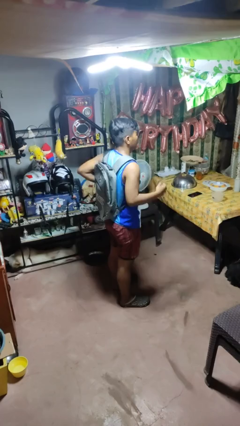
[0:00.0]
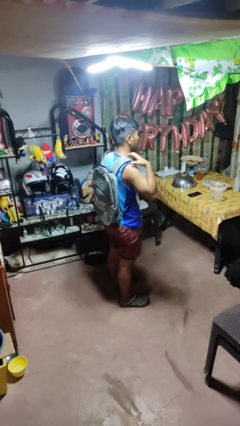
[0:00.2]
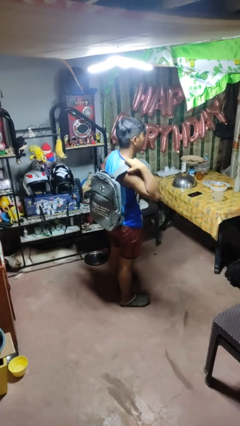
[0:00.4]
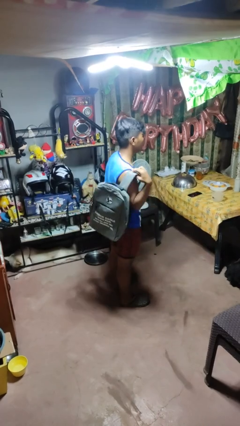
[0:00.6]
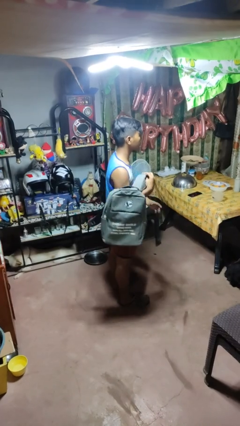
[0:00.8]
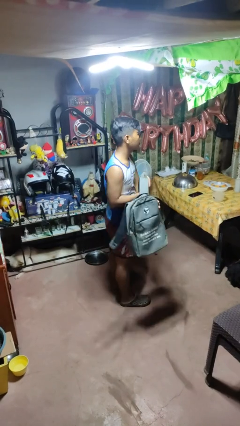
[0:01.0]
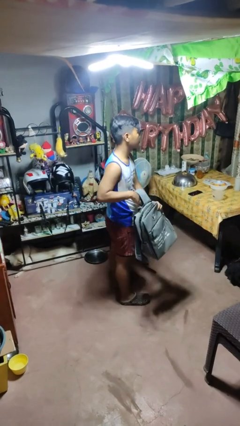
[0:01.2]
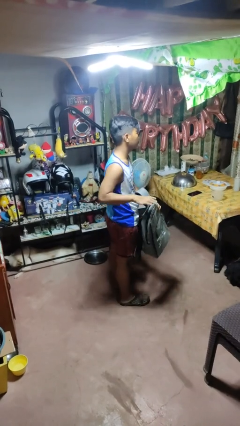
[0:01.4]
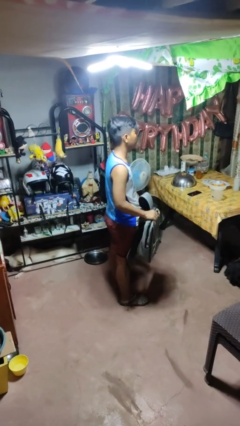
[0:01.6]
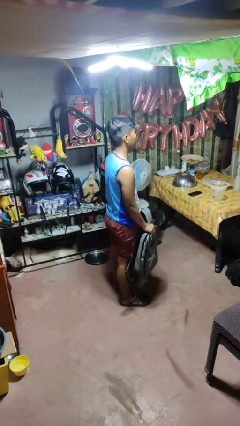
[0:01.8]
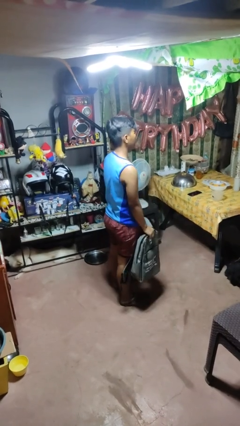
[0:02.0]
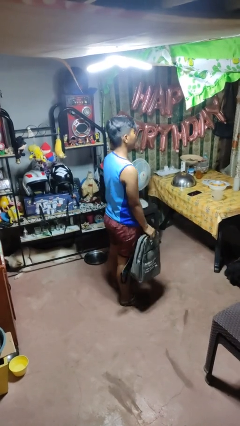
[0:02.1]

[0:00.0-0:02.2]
person takes off backpack

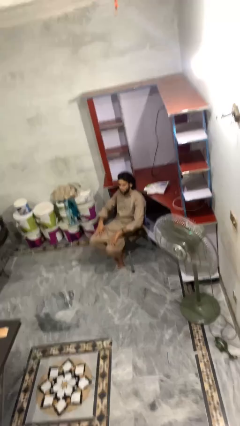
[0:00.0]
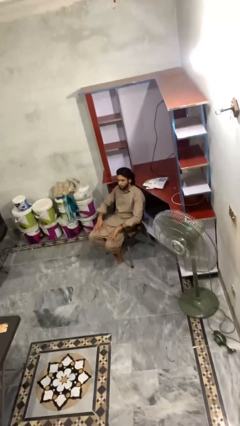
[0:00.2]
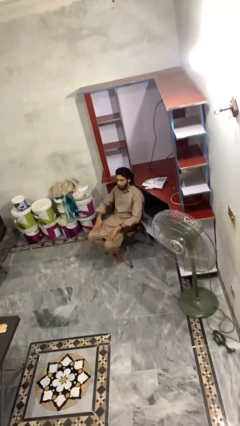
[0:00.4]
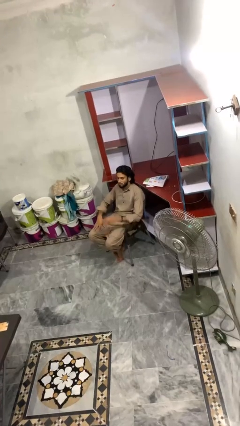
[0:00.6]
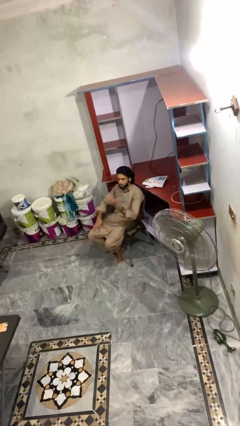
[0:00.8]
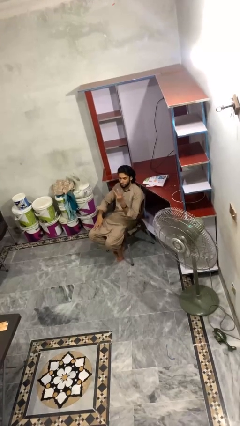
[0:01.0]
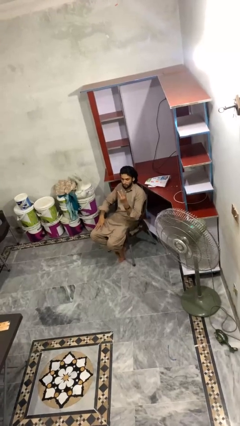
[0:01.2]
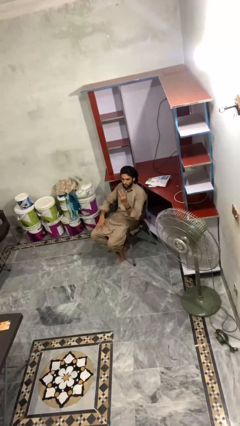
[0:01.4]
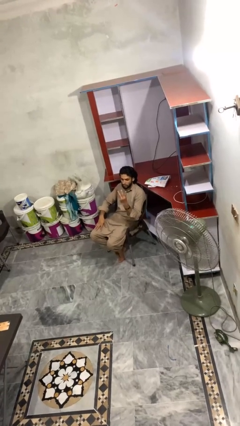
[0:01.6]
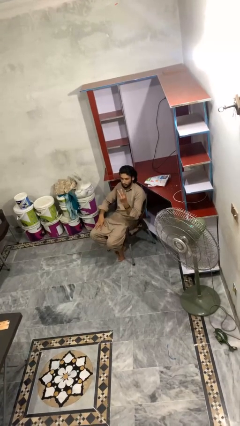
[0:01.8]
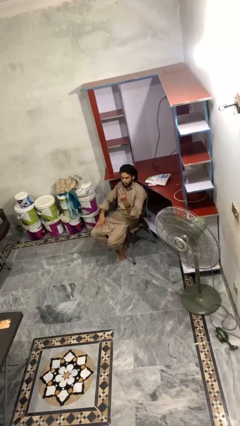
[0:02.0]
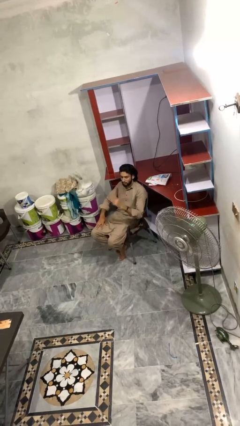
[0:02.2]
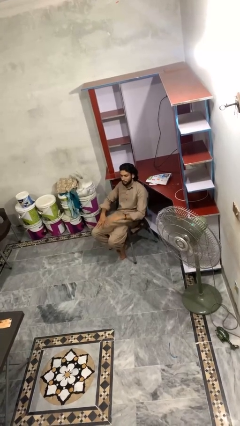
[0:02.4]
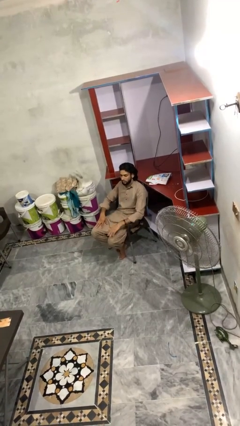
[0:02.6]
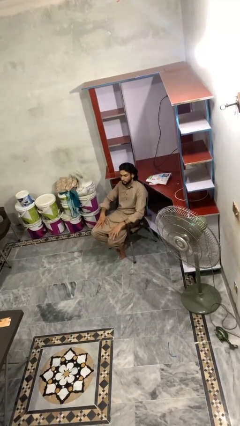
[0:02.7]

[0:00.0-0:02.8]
person gestures number three

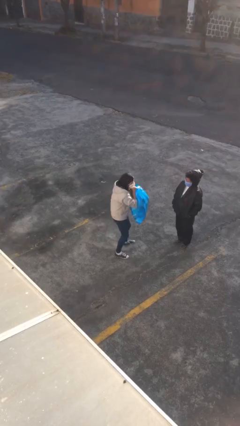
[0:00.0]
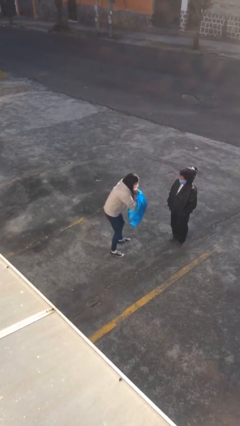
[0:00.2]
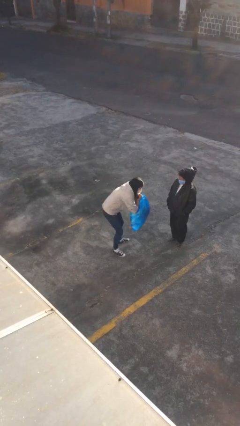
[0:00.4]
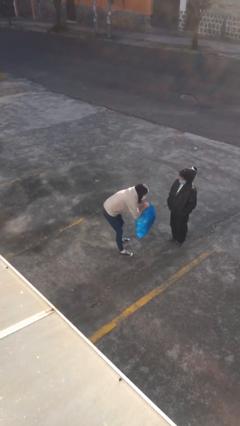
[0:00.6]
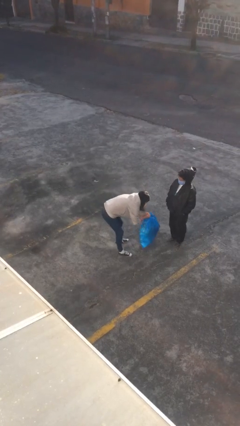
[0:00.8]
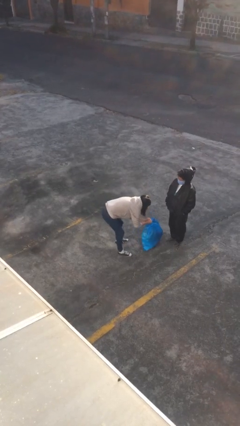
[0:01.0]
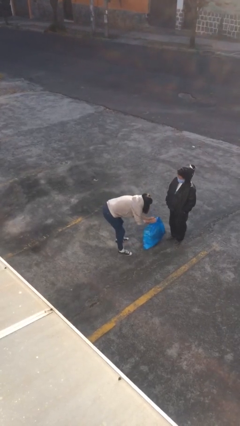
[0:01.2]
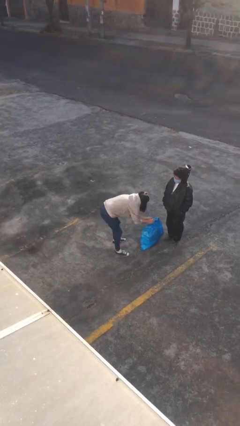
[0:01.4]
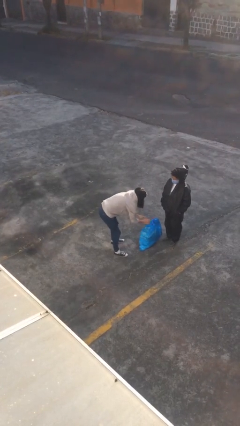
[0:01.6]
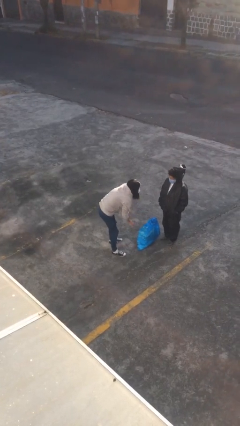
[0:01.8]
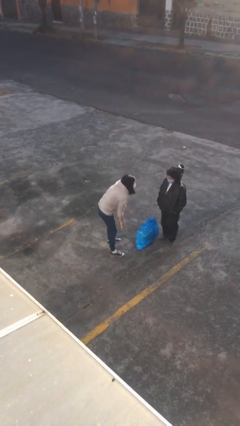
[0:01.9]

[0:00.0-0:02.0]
person puts down object on floor

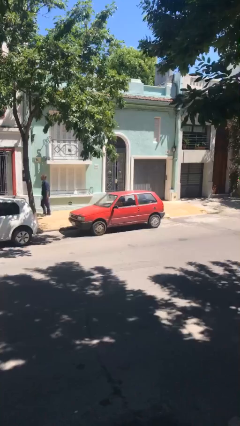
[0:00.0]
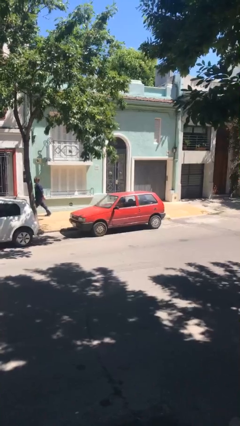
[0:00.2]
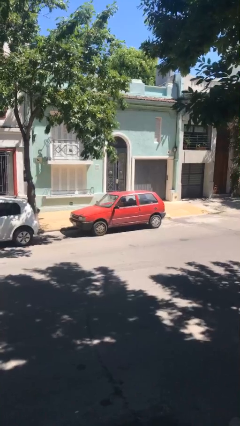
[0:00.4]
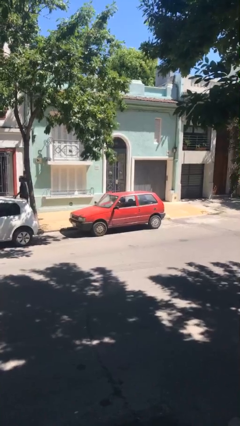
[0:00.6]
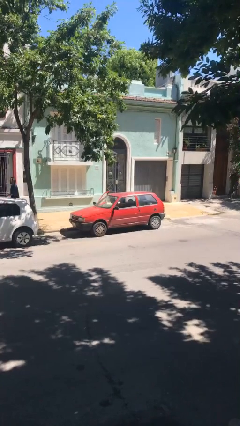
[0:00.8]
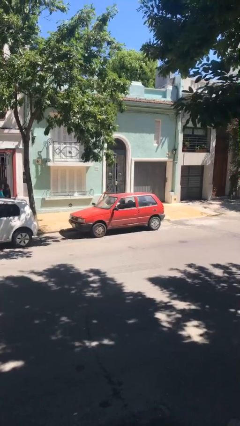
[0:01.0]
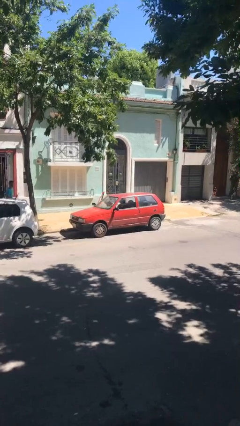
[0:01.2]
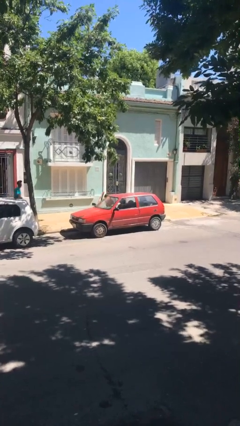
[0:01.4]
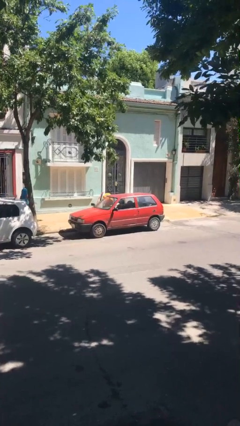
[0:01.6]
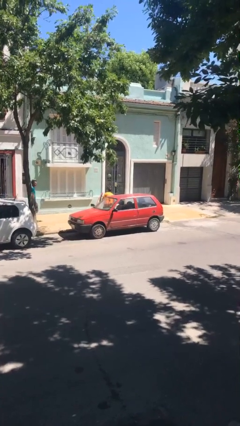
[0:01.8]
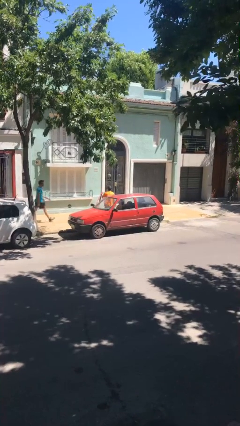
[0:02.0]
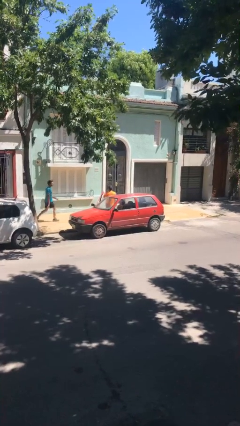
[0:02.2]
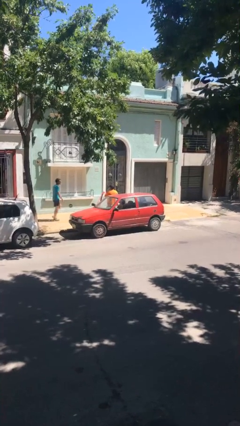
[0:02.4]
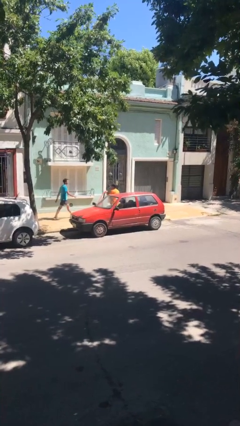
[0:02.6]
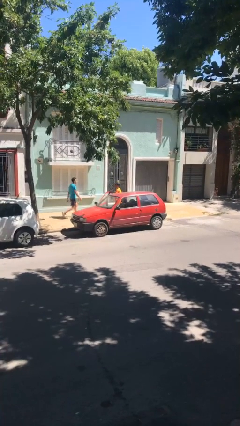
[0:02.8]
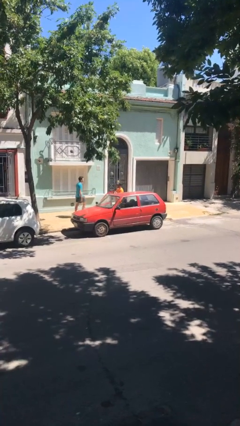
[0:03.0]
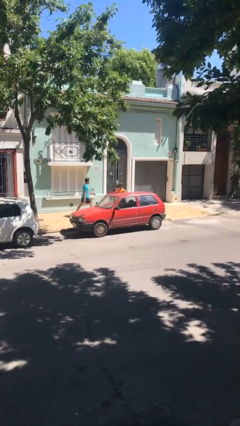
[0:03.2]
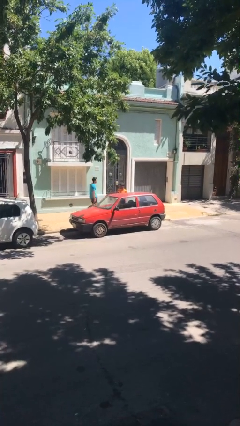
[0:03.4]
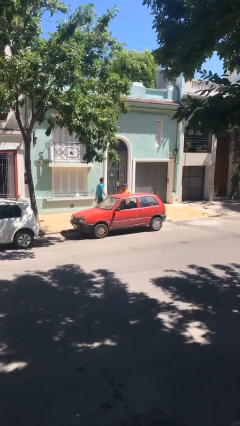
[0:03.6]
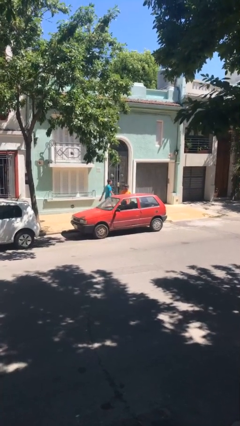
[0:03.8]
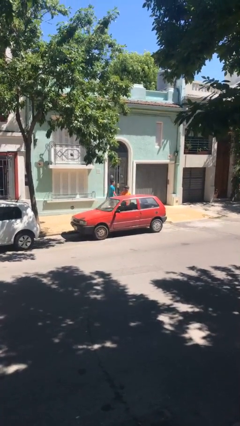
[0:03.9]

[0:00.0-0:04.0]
car drops off person

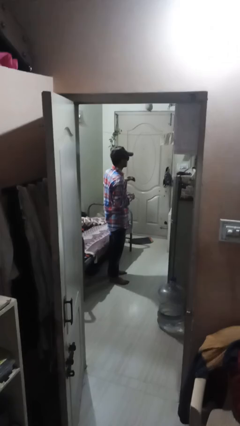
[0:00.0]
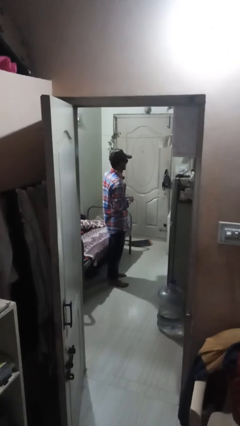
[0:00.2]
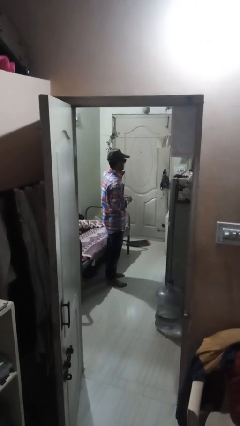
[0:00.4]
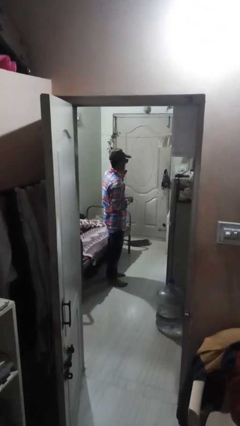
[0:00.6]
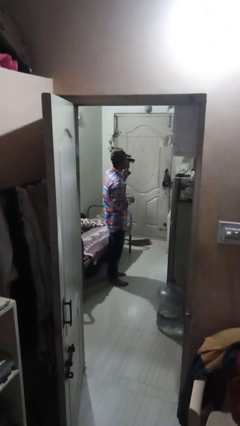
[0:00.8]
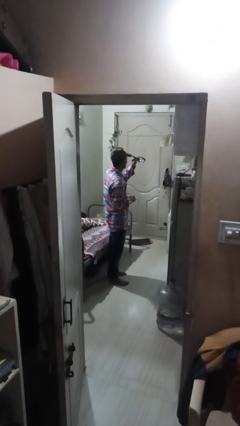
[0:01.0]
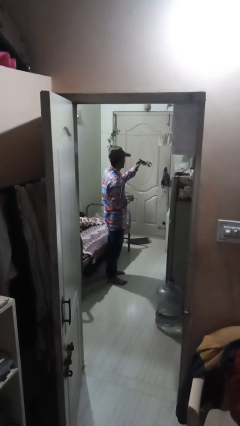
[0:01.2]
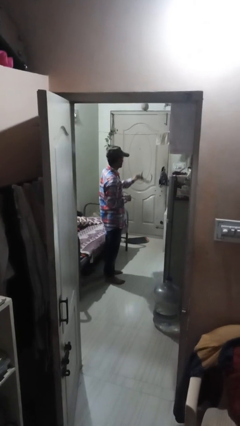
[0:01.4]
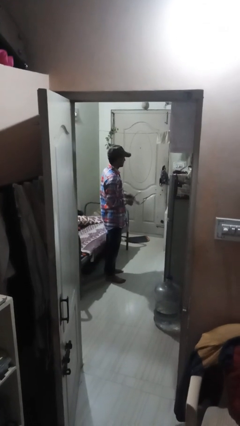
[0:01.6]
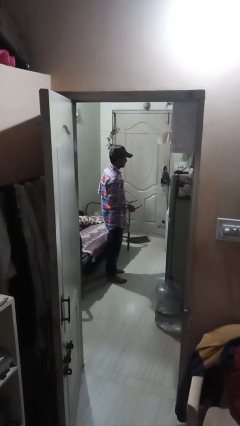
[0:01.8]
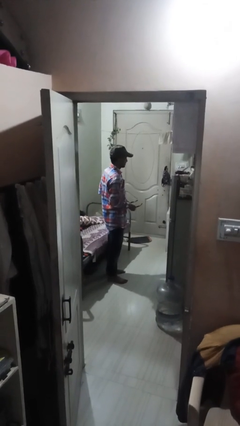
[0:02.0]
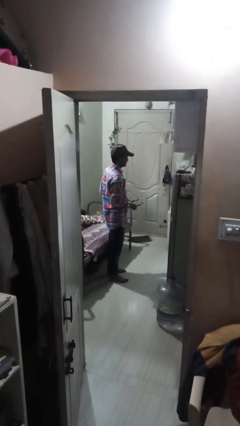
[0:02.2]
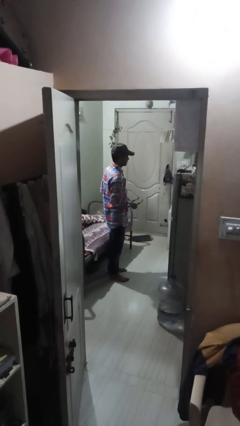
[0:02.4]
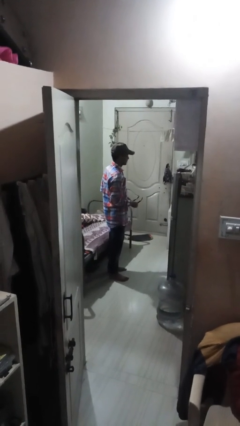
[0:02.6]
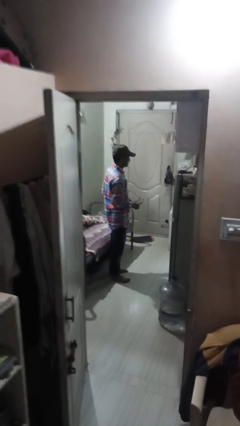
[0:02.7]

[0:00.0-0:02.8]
person takes off sunglasses

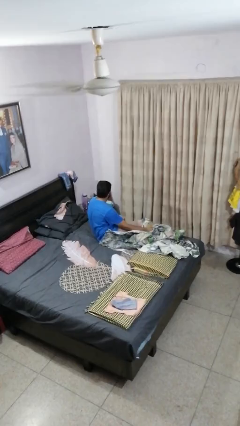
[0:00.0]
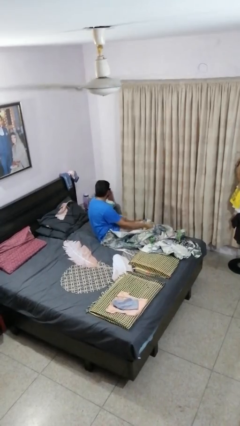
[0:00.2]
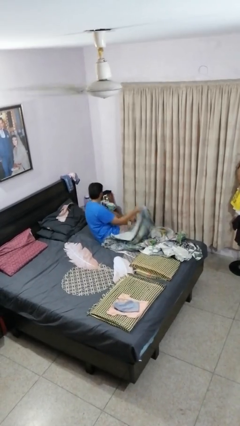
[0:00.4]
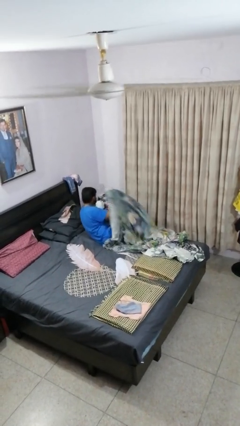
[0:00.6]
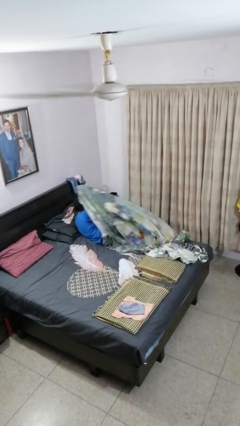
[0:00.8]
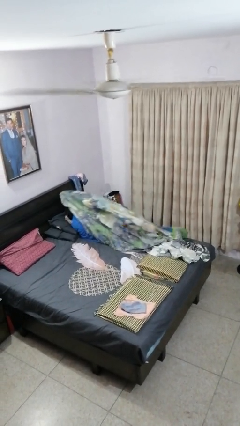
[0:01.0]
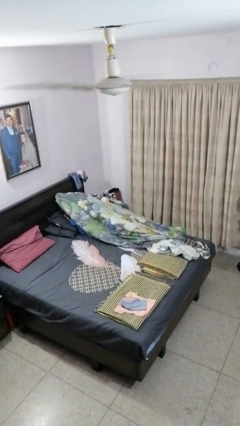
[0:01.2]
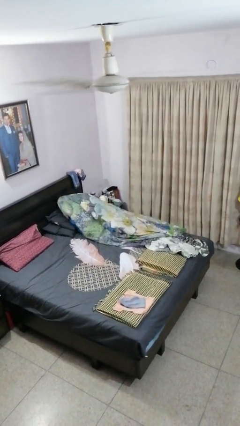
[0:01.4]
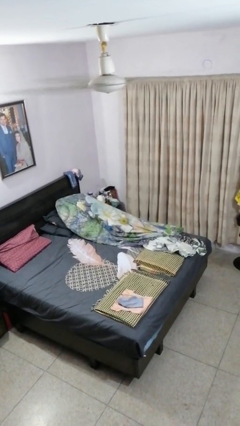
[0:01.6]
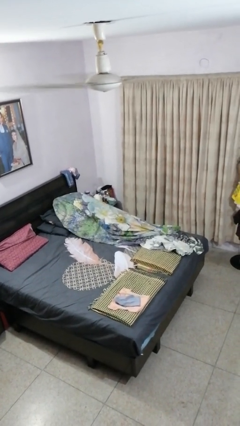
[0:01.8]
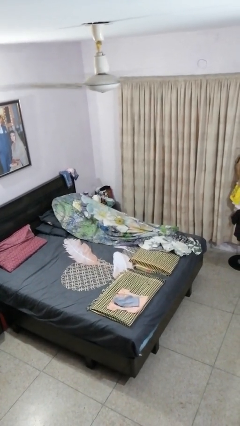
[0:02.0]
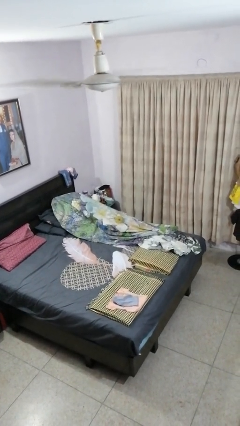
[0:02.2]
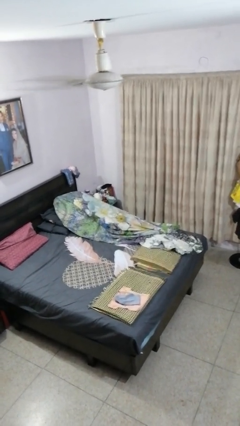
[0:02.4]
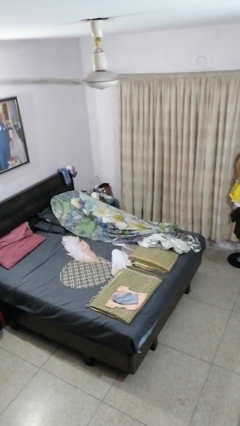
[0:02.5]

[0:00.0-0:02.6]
person covers with bedsheets

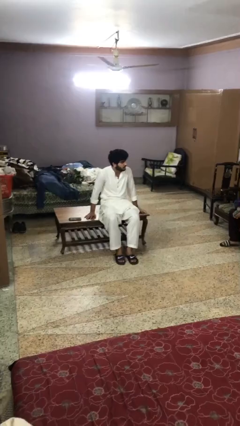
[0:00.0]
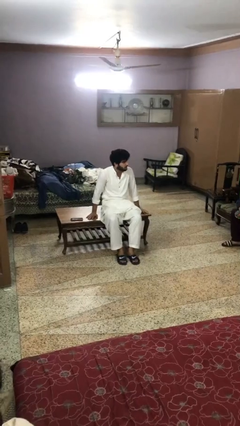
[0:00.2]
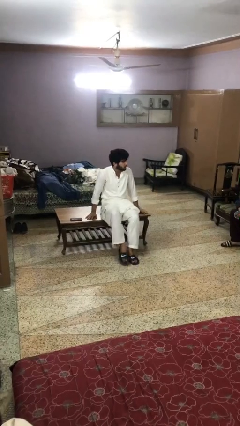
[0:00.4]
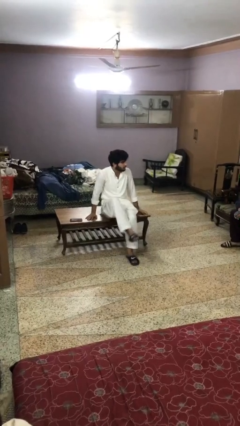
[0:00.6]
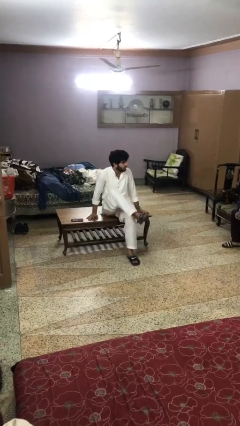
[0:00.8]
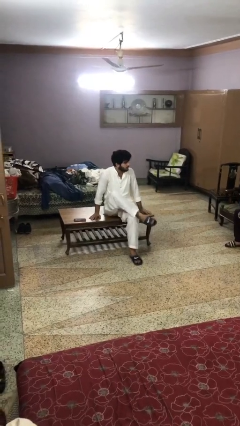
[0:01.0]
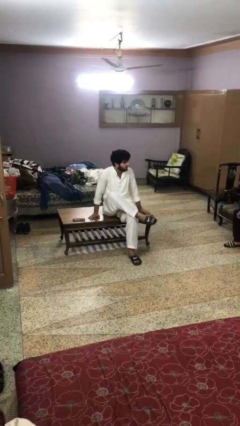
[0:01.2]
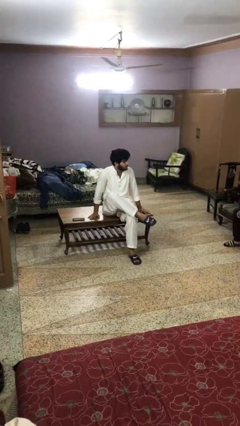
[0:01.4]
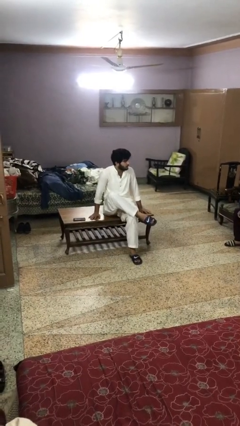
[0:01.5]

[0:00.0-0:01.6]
person crosses legs
